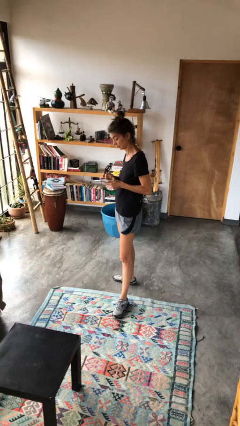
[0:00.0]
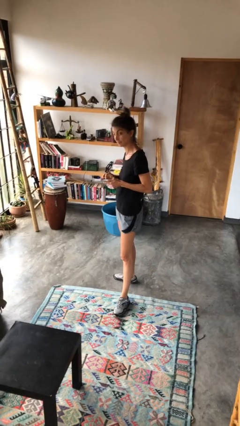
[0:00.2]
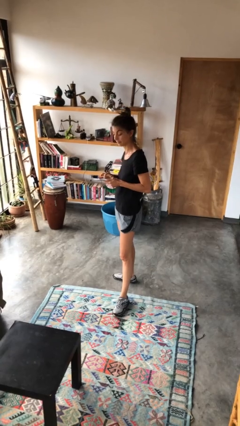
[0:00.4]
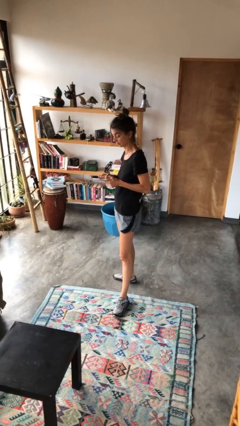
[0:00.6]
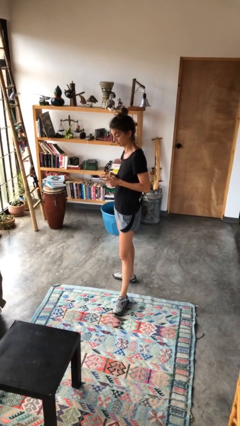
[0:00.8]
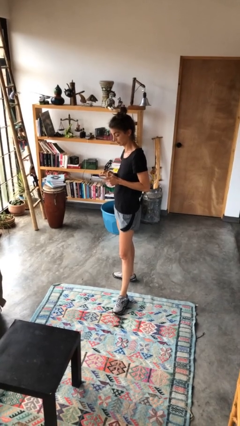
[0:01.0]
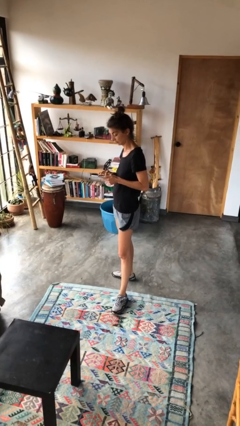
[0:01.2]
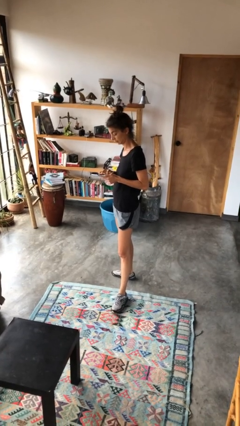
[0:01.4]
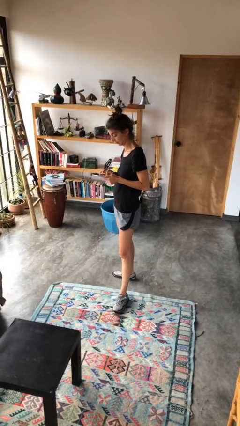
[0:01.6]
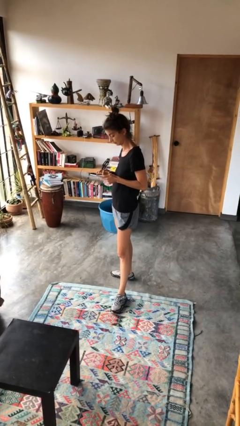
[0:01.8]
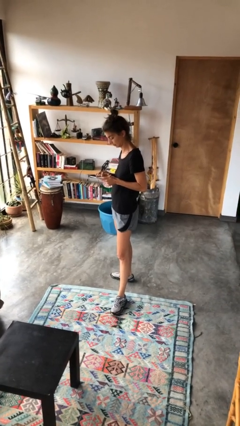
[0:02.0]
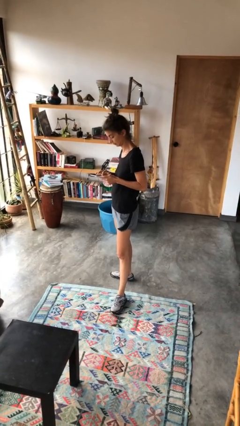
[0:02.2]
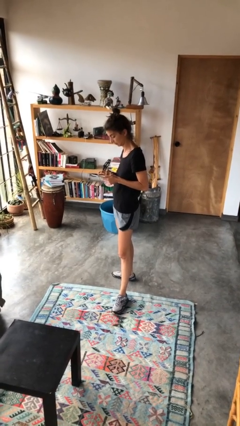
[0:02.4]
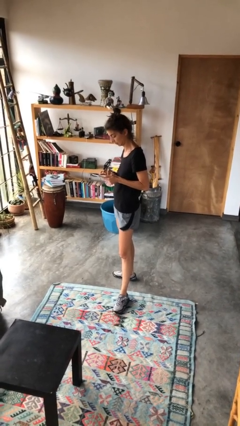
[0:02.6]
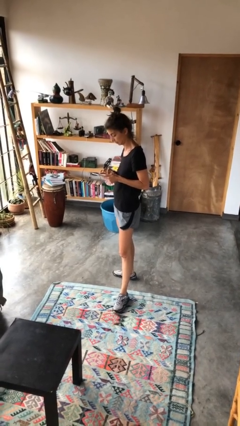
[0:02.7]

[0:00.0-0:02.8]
person interacts with tablet

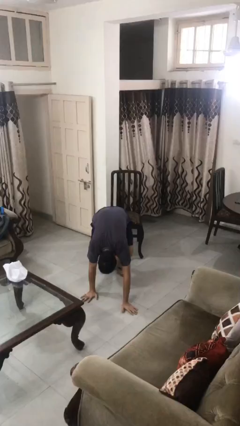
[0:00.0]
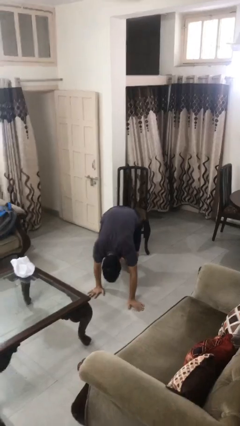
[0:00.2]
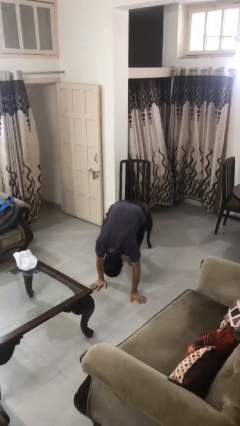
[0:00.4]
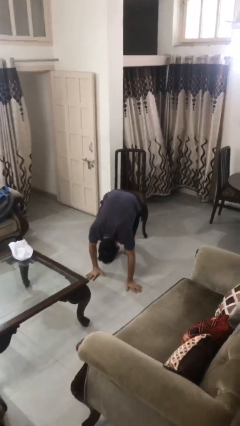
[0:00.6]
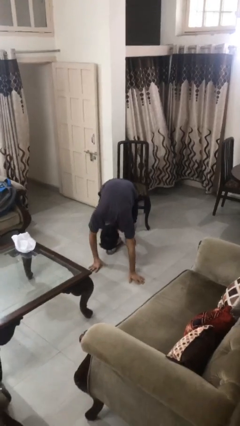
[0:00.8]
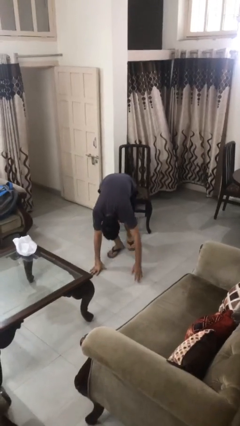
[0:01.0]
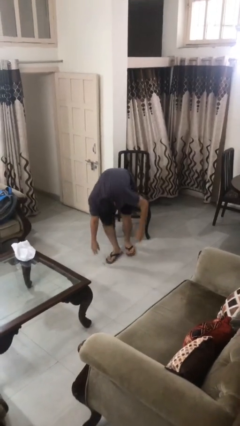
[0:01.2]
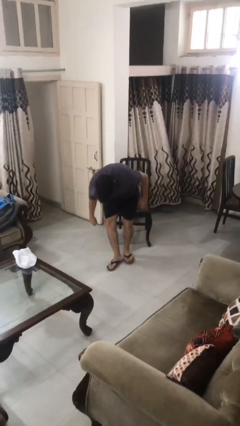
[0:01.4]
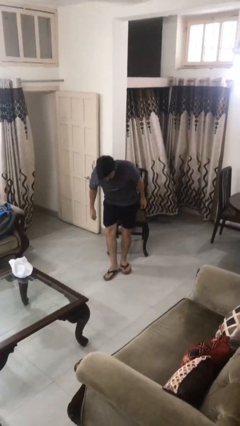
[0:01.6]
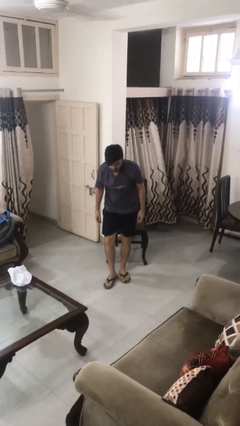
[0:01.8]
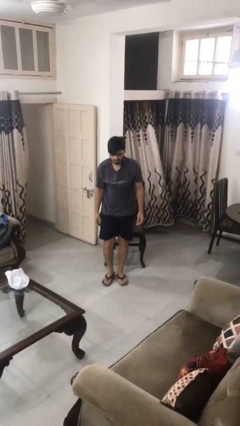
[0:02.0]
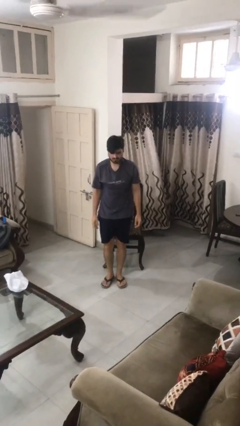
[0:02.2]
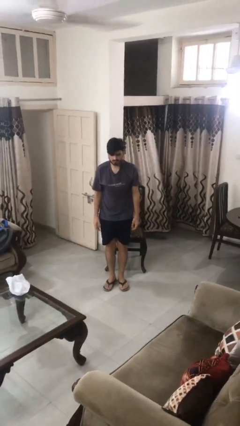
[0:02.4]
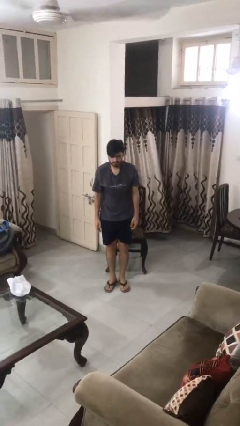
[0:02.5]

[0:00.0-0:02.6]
person stands up from floor

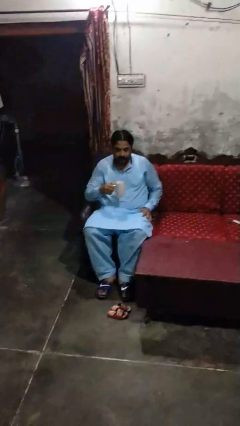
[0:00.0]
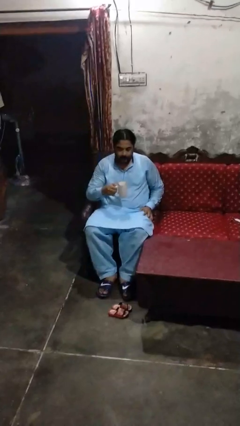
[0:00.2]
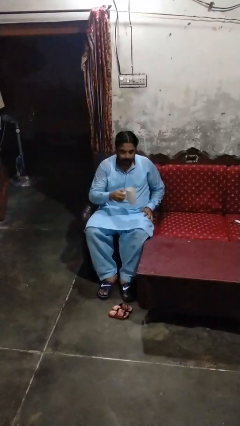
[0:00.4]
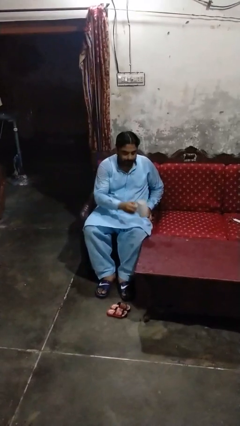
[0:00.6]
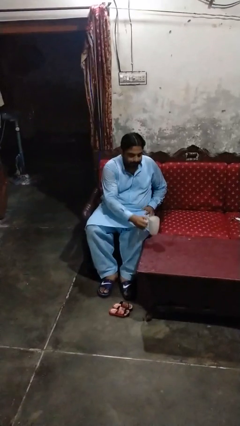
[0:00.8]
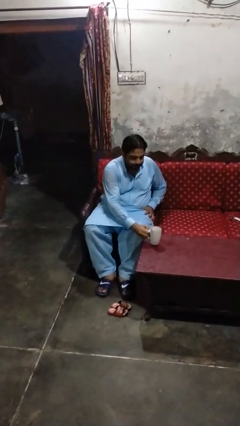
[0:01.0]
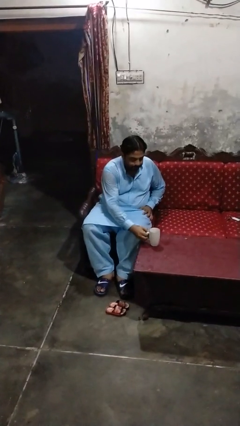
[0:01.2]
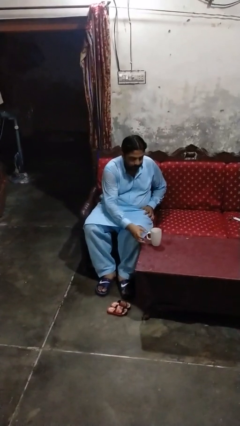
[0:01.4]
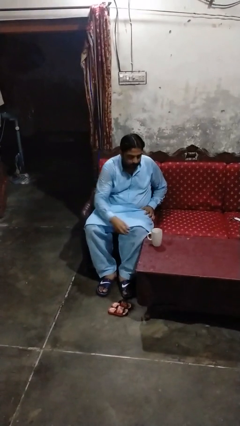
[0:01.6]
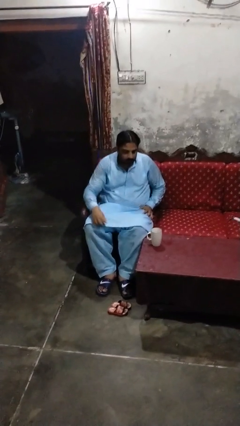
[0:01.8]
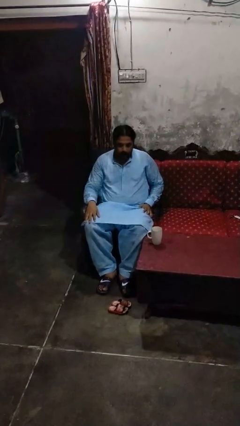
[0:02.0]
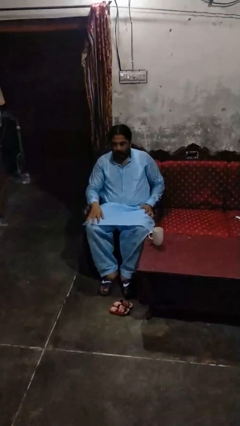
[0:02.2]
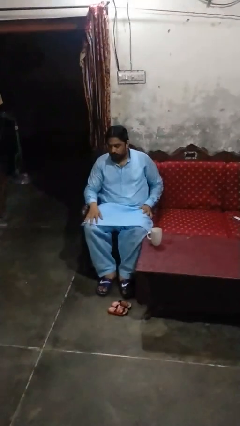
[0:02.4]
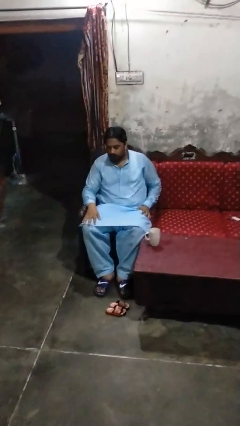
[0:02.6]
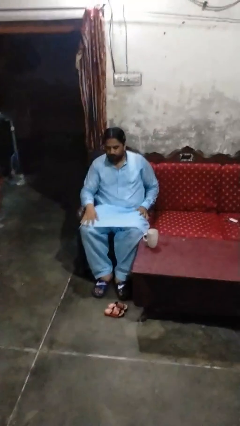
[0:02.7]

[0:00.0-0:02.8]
person puts down object on table

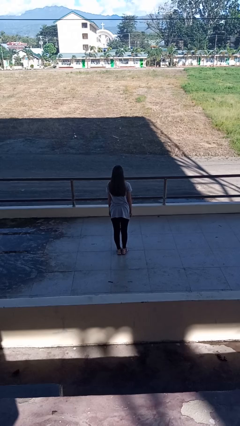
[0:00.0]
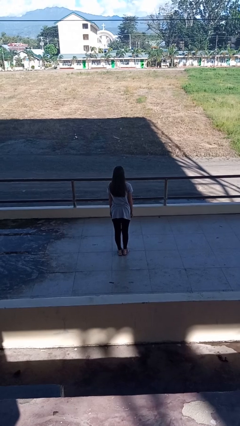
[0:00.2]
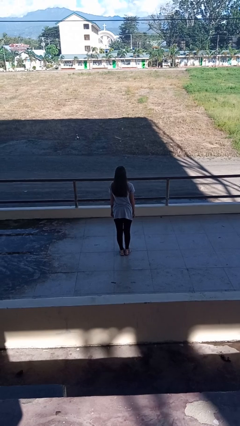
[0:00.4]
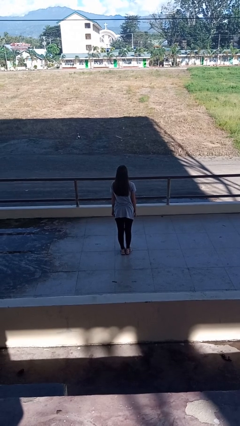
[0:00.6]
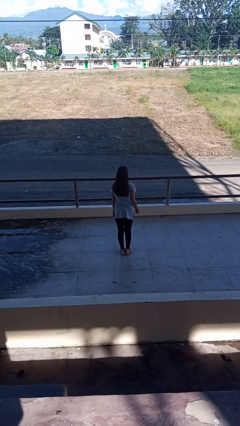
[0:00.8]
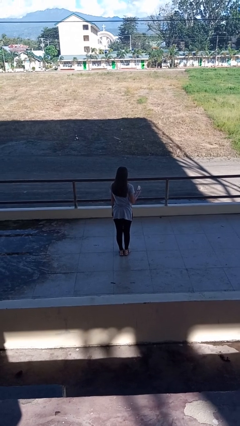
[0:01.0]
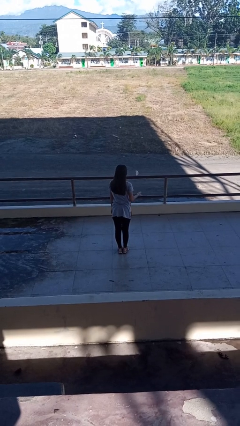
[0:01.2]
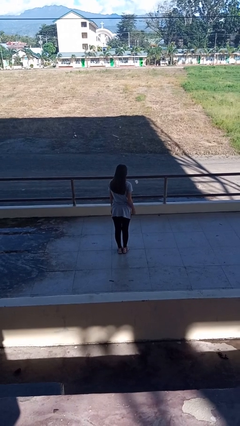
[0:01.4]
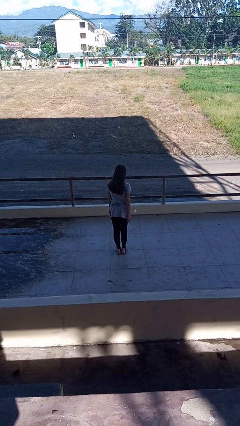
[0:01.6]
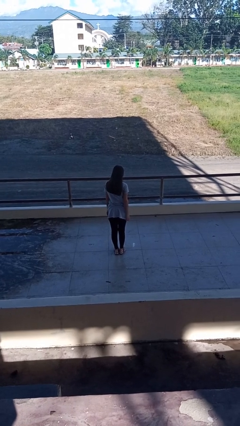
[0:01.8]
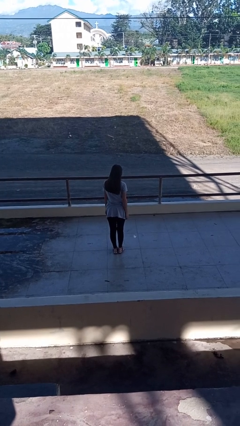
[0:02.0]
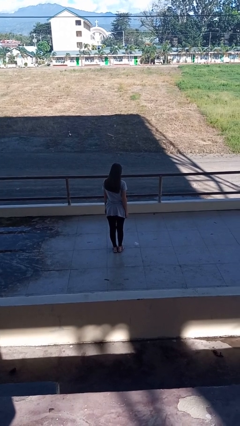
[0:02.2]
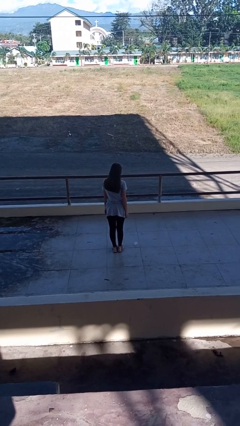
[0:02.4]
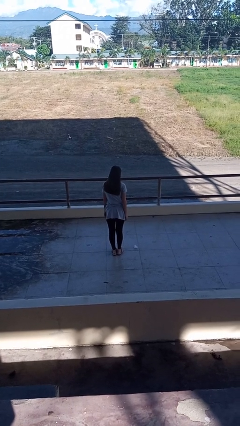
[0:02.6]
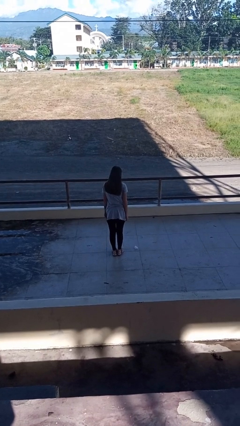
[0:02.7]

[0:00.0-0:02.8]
person throws object into air

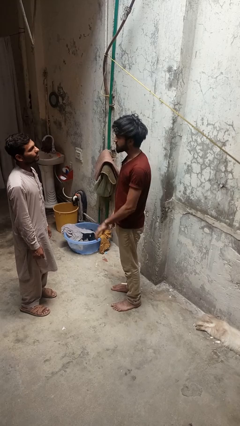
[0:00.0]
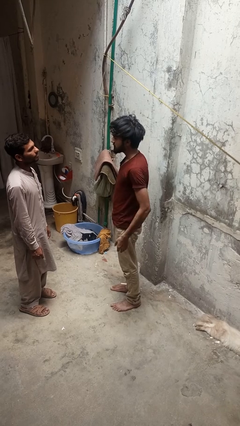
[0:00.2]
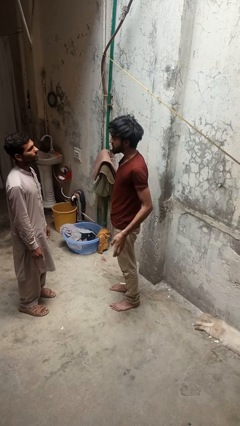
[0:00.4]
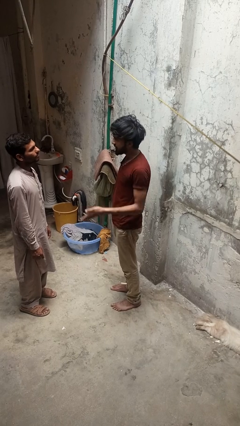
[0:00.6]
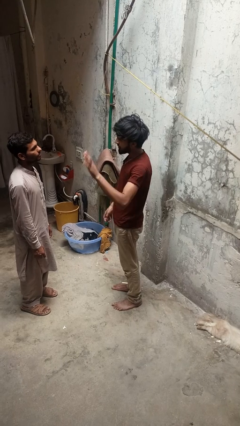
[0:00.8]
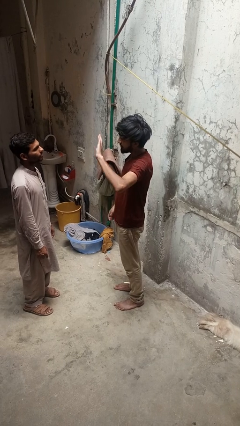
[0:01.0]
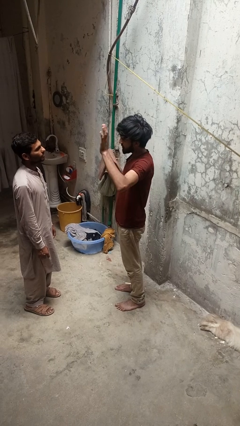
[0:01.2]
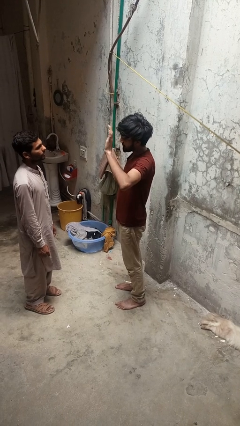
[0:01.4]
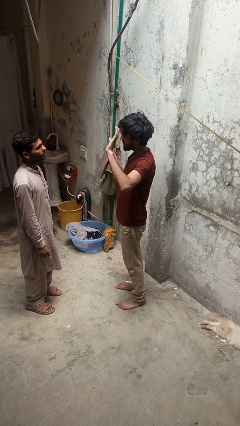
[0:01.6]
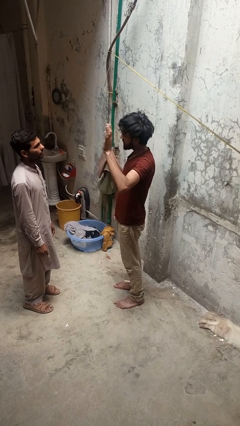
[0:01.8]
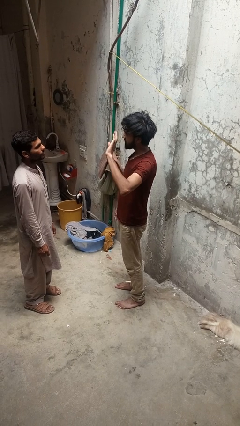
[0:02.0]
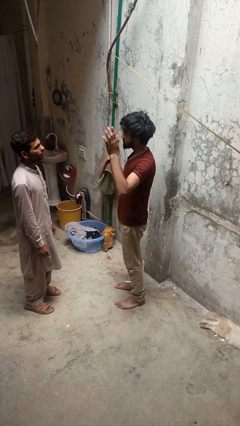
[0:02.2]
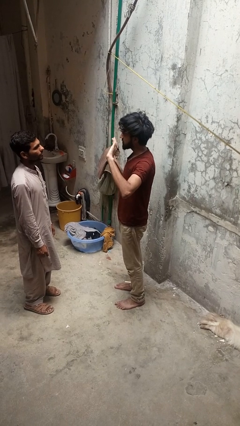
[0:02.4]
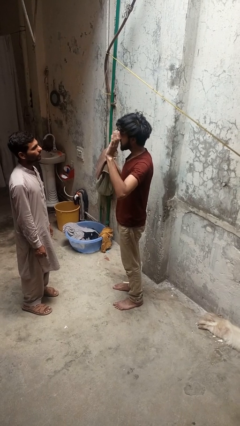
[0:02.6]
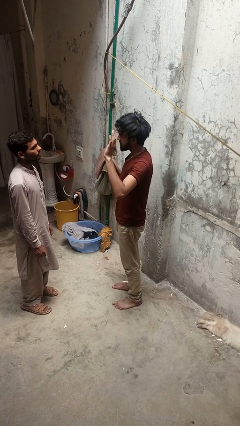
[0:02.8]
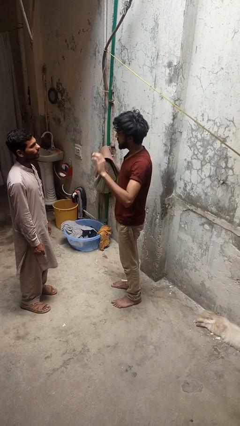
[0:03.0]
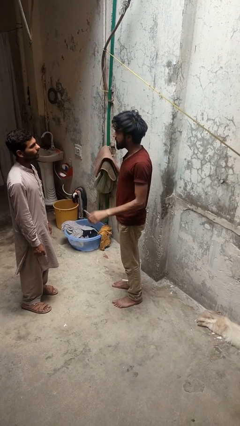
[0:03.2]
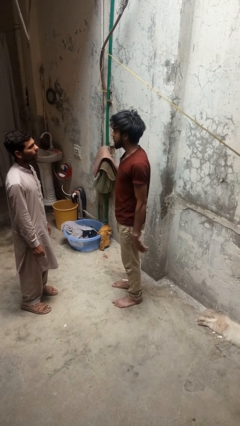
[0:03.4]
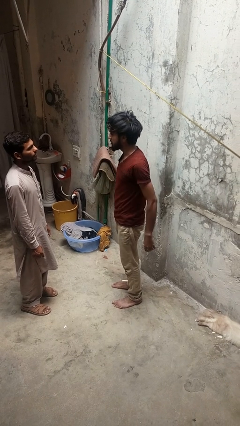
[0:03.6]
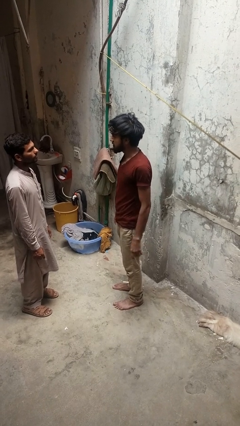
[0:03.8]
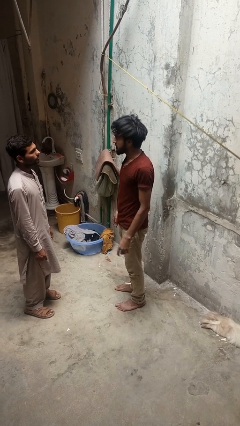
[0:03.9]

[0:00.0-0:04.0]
person waves at person

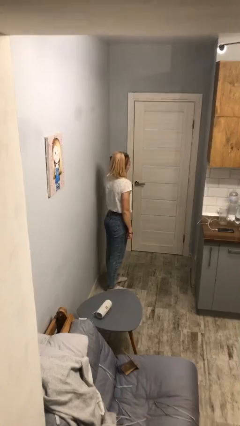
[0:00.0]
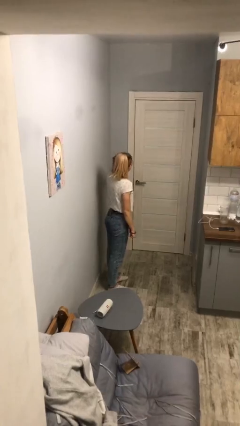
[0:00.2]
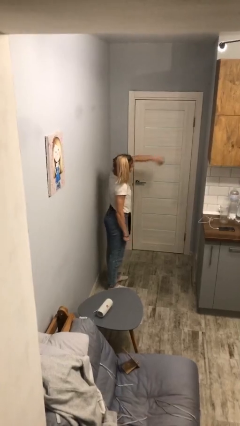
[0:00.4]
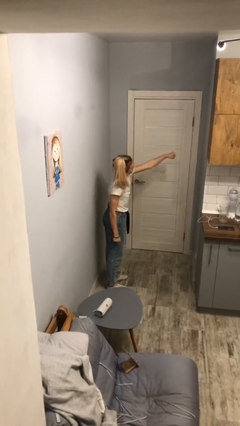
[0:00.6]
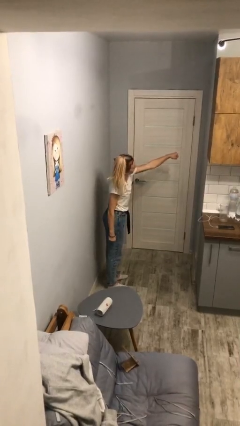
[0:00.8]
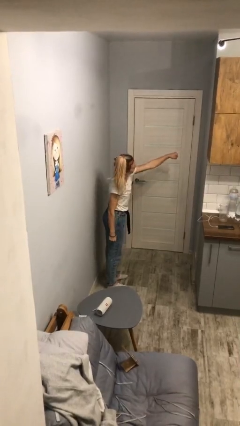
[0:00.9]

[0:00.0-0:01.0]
person punches

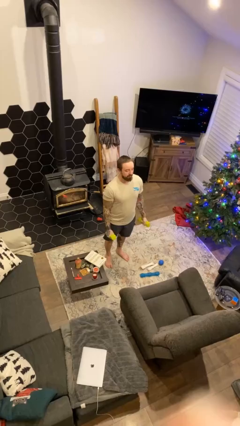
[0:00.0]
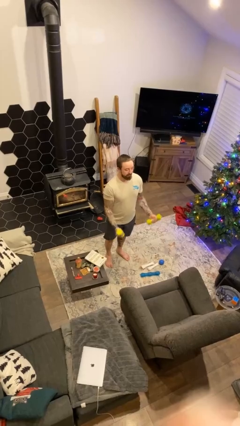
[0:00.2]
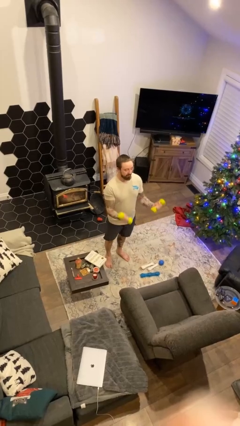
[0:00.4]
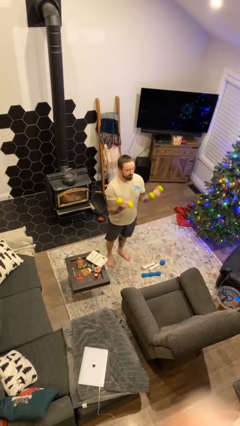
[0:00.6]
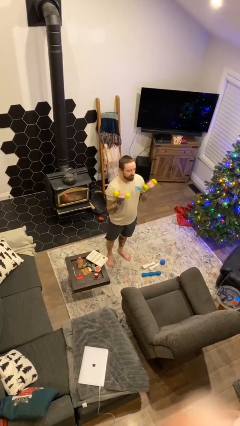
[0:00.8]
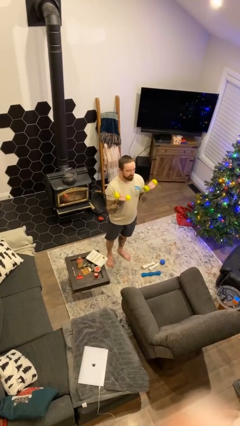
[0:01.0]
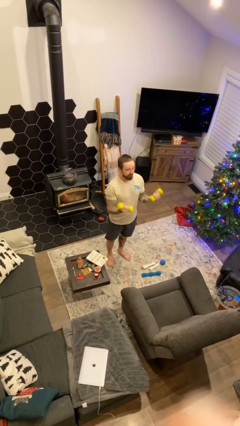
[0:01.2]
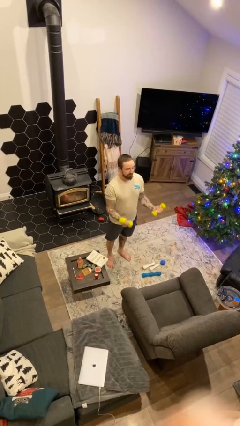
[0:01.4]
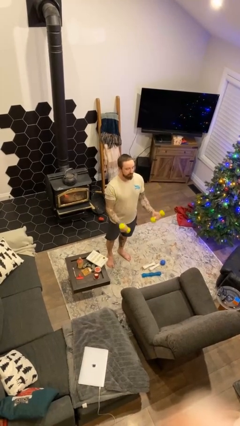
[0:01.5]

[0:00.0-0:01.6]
person lifts dumbbells
